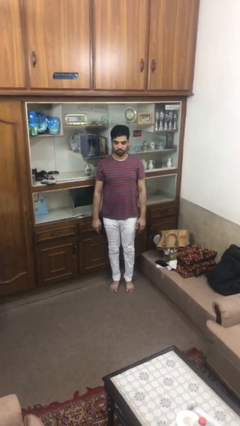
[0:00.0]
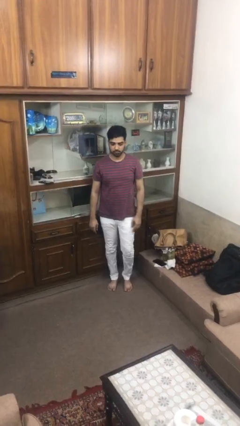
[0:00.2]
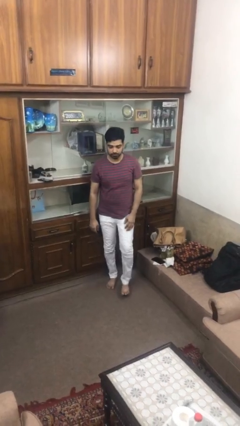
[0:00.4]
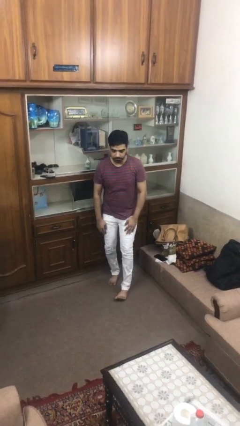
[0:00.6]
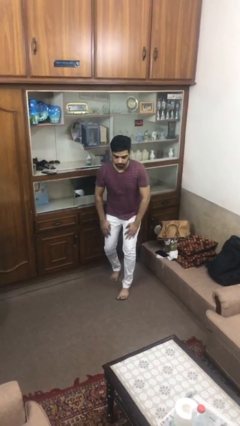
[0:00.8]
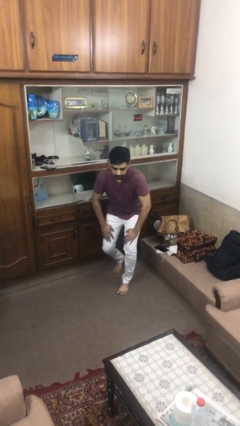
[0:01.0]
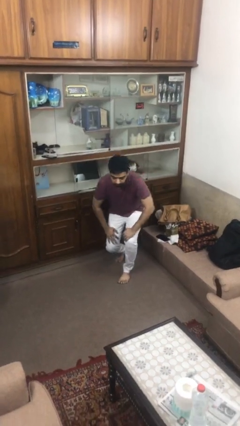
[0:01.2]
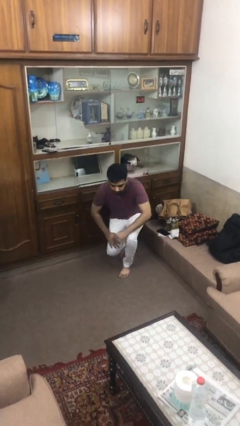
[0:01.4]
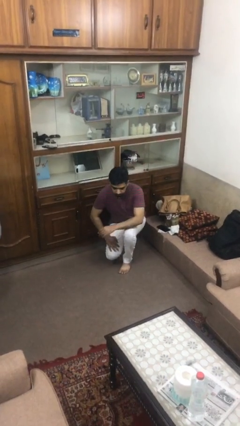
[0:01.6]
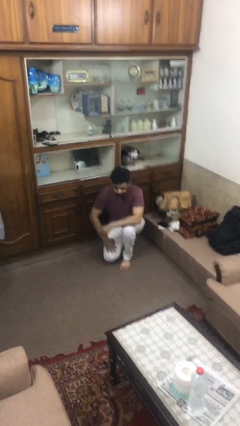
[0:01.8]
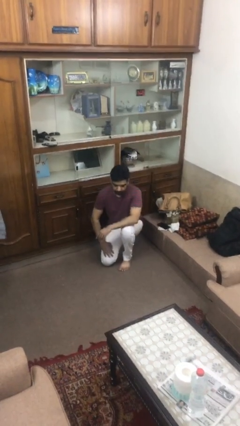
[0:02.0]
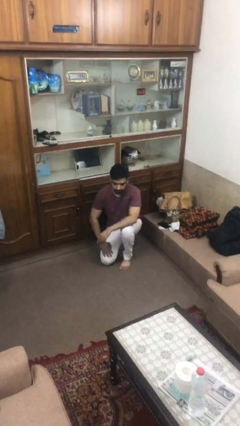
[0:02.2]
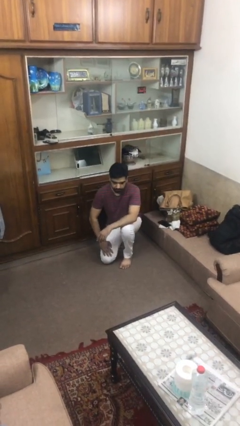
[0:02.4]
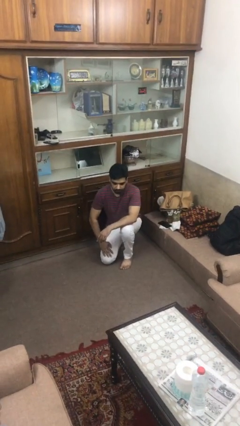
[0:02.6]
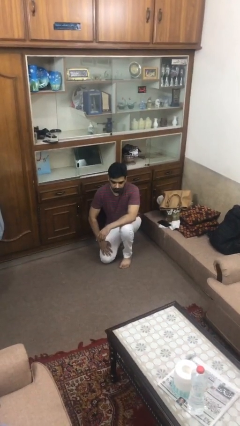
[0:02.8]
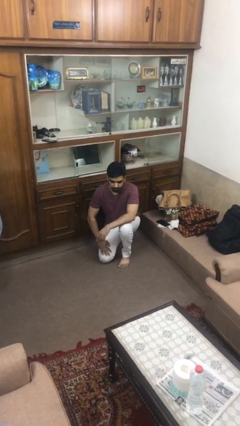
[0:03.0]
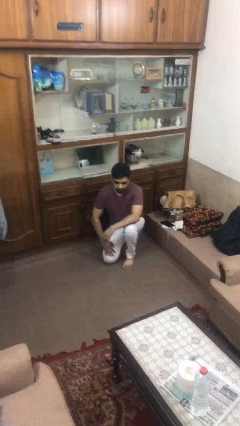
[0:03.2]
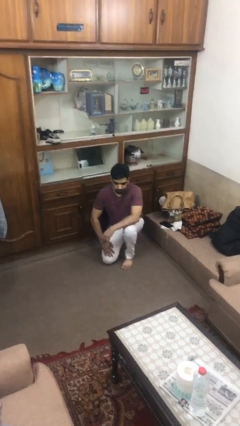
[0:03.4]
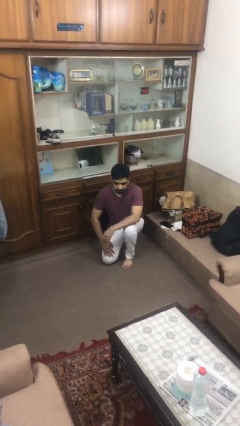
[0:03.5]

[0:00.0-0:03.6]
person kneels

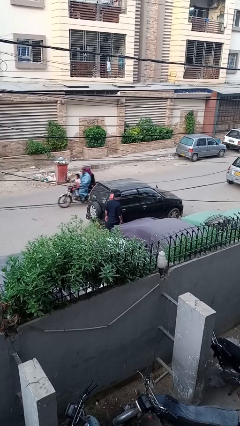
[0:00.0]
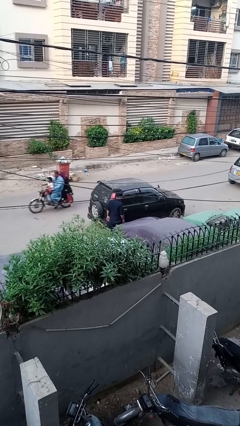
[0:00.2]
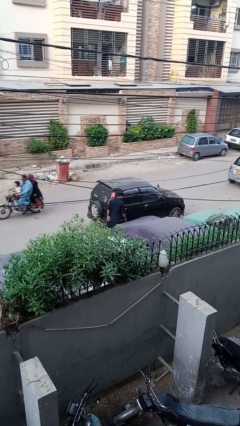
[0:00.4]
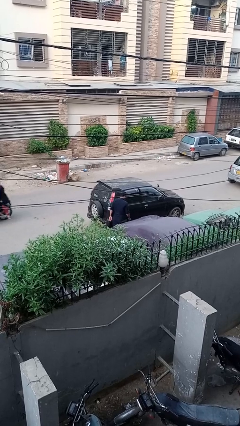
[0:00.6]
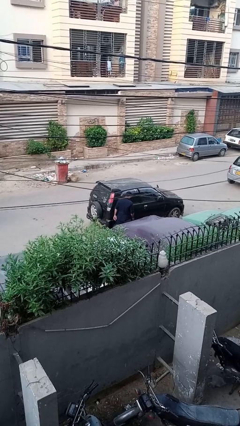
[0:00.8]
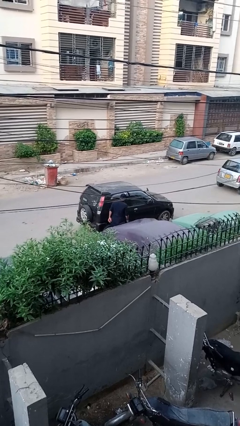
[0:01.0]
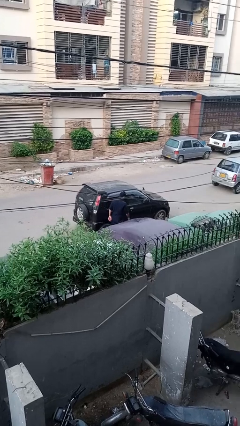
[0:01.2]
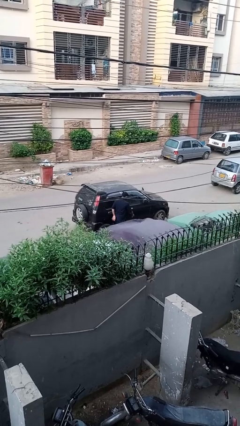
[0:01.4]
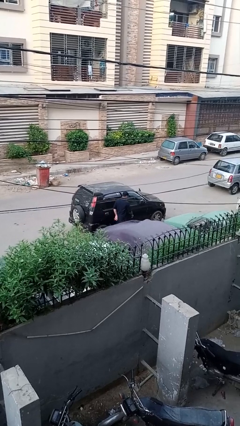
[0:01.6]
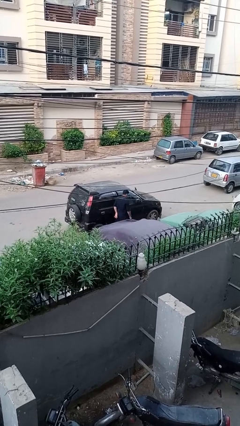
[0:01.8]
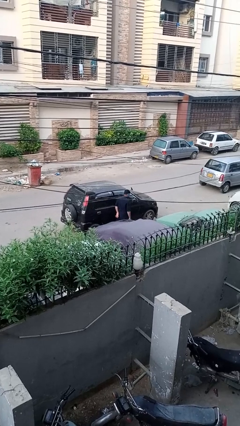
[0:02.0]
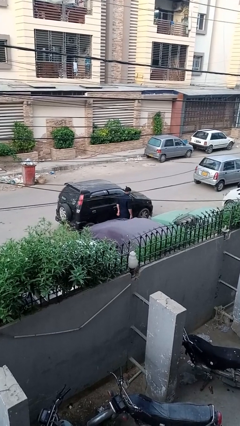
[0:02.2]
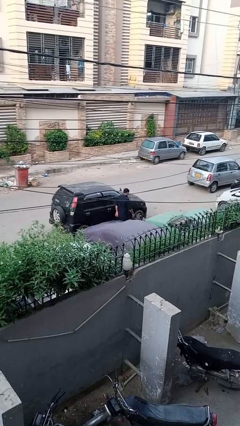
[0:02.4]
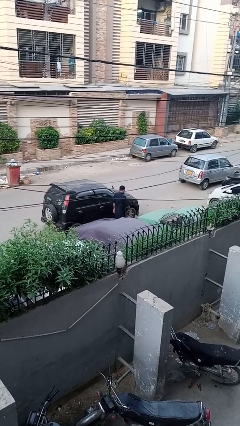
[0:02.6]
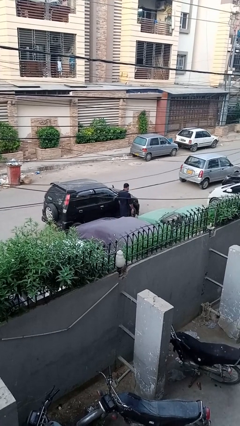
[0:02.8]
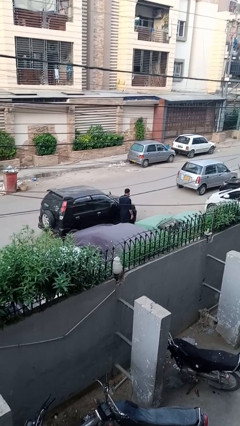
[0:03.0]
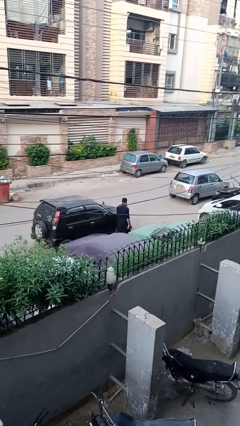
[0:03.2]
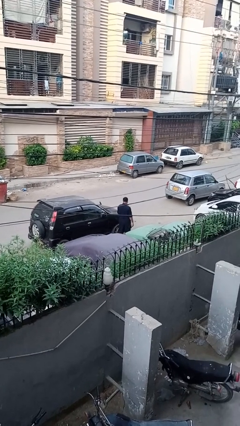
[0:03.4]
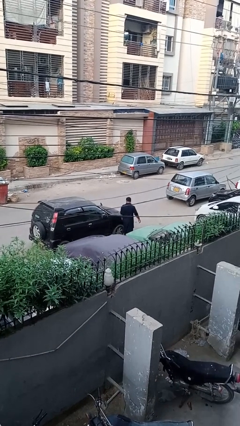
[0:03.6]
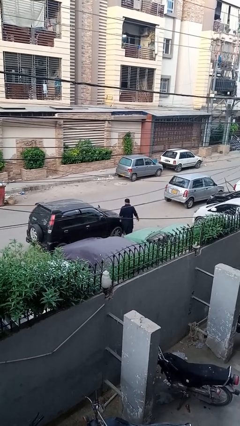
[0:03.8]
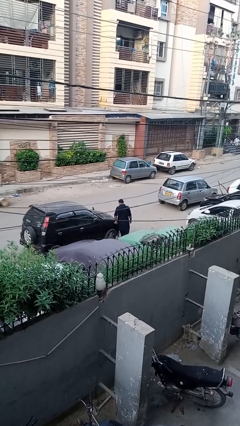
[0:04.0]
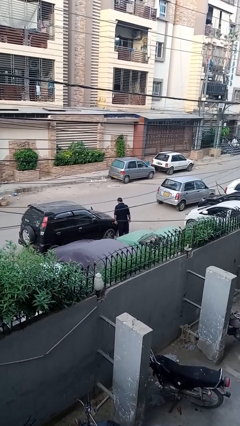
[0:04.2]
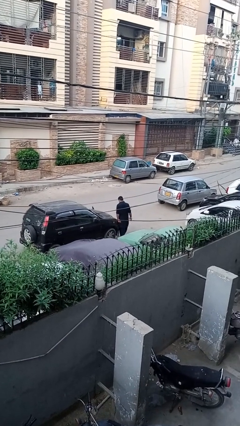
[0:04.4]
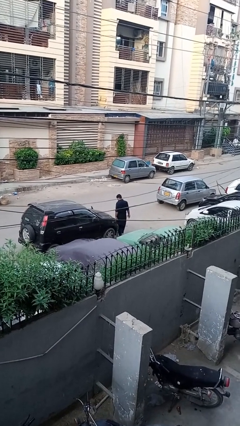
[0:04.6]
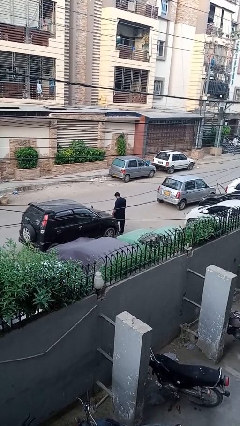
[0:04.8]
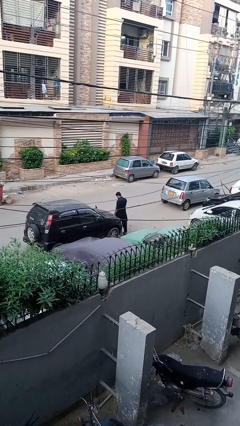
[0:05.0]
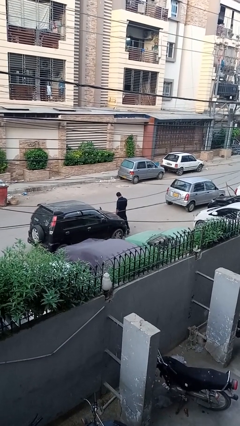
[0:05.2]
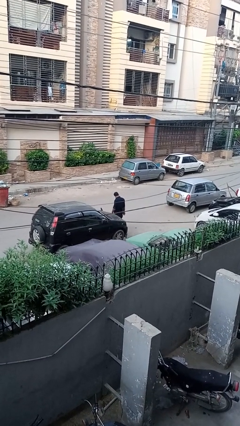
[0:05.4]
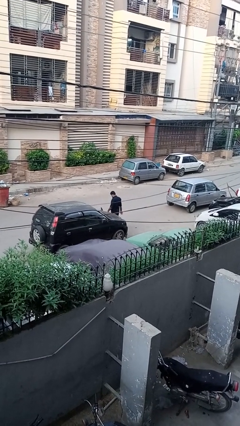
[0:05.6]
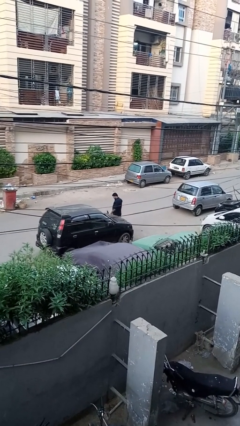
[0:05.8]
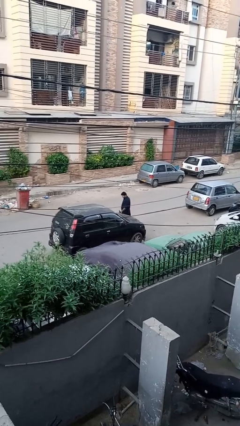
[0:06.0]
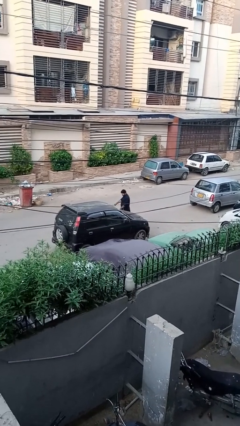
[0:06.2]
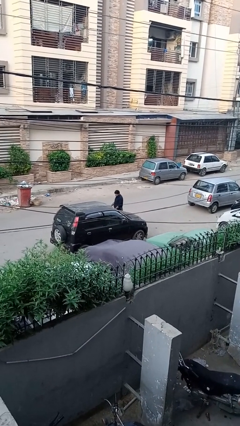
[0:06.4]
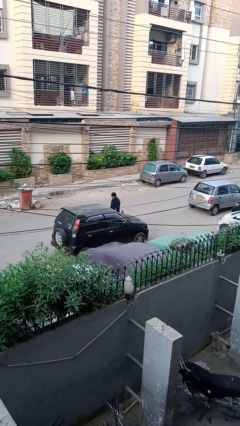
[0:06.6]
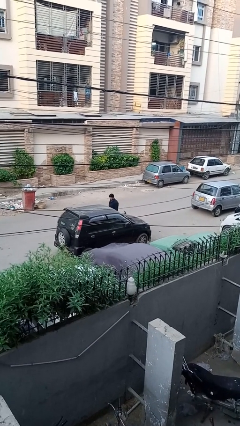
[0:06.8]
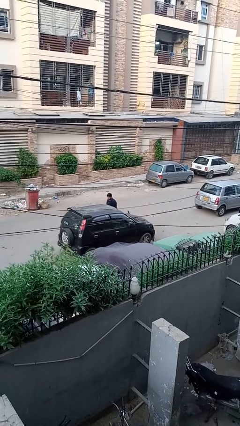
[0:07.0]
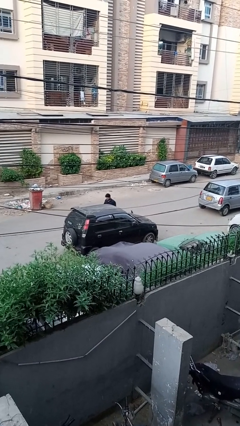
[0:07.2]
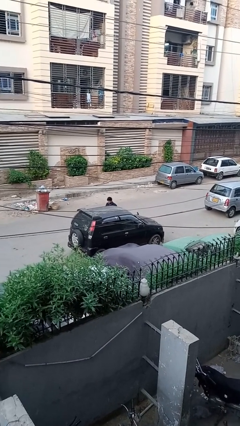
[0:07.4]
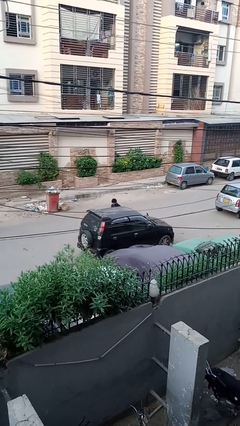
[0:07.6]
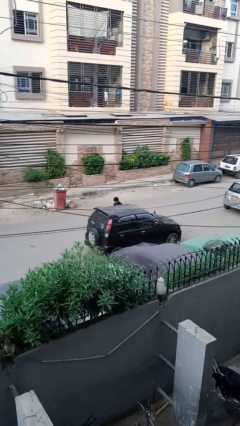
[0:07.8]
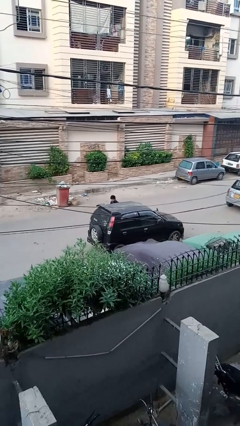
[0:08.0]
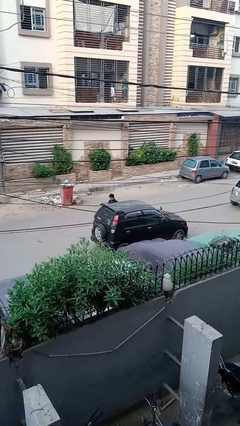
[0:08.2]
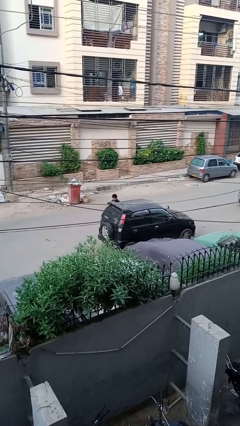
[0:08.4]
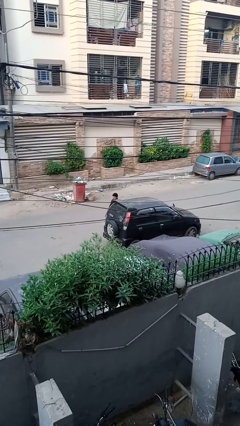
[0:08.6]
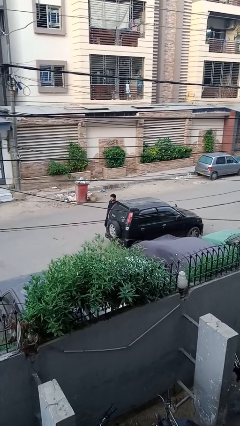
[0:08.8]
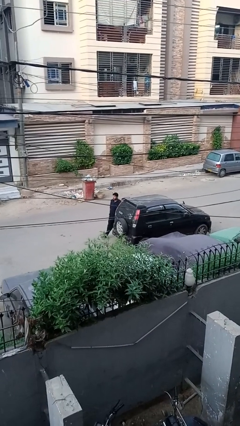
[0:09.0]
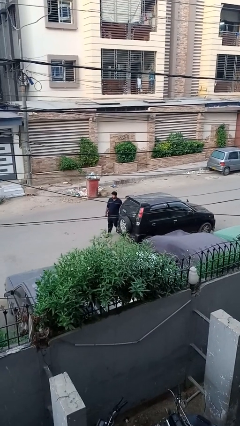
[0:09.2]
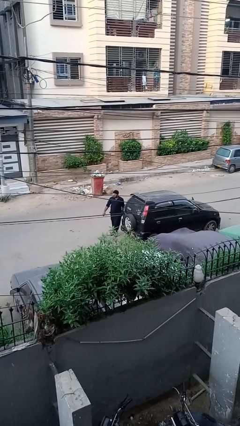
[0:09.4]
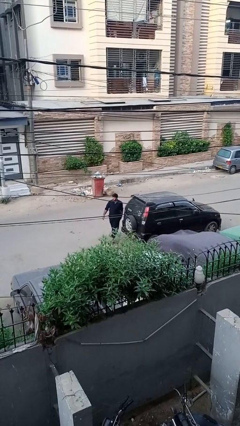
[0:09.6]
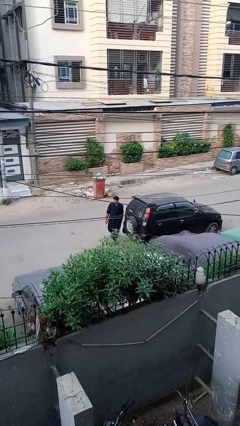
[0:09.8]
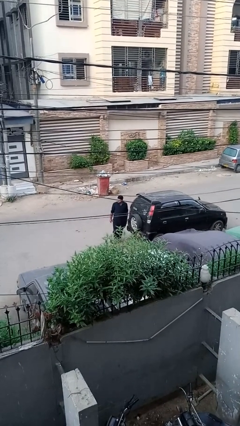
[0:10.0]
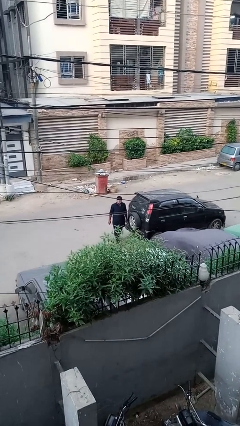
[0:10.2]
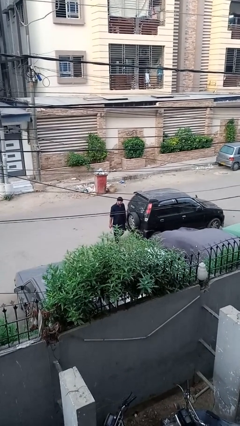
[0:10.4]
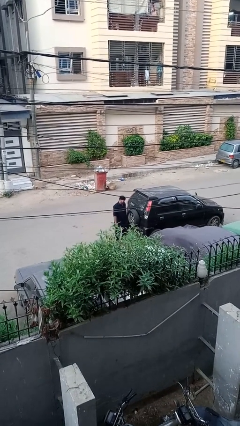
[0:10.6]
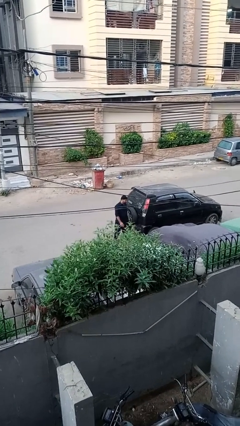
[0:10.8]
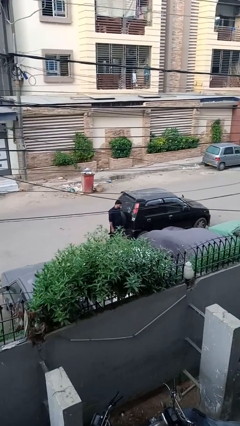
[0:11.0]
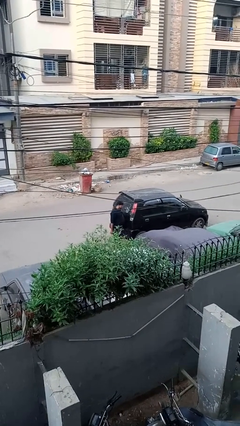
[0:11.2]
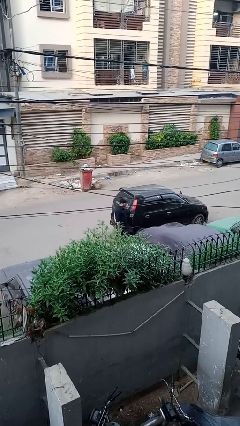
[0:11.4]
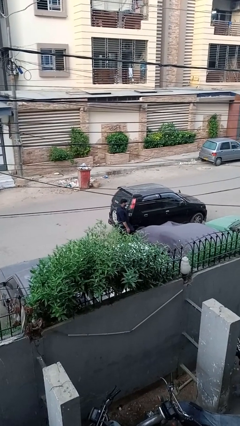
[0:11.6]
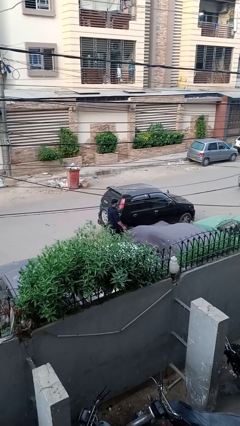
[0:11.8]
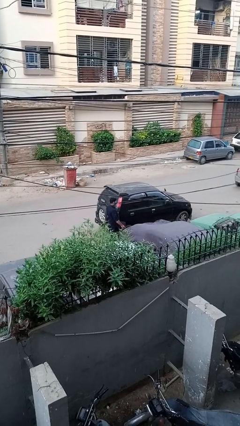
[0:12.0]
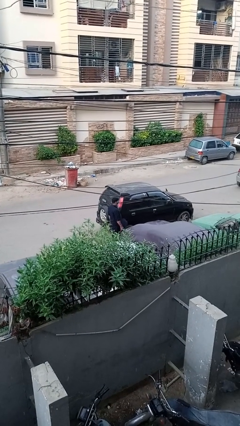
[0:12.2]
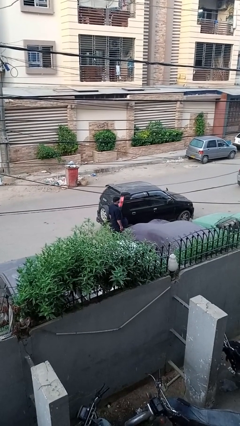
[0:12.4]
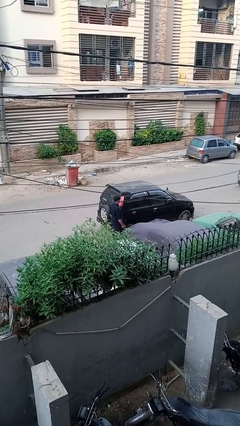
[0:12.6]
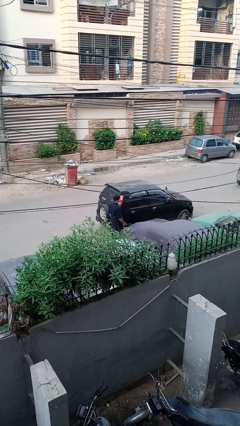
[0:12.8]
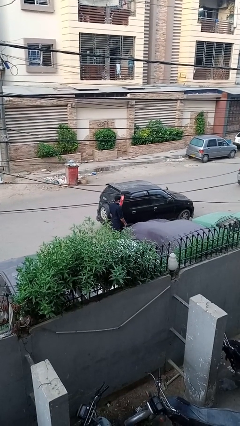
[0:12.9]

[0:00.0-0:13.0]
person walks around car

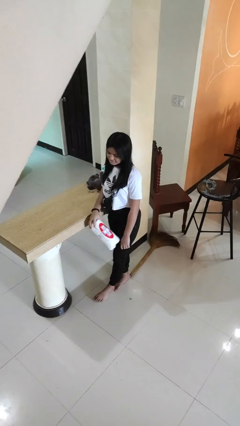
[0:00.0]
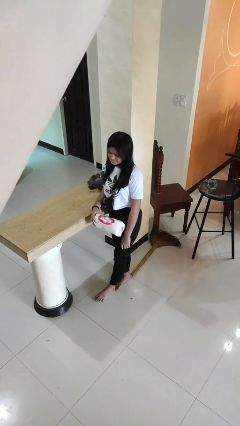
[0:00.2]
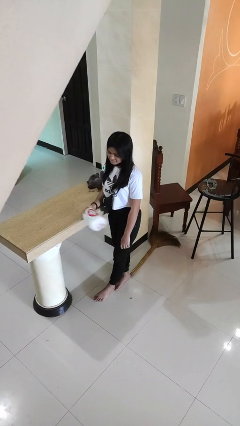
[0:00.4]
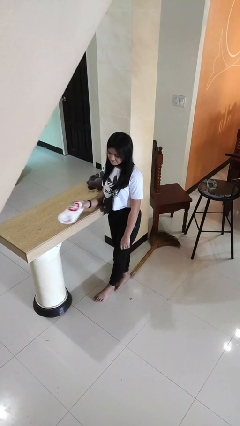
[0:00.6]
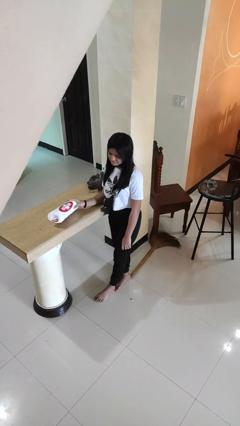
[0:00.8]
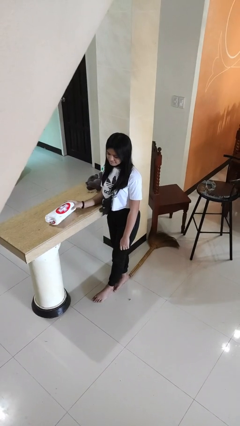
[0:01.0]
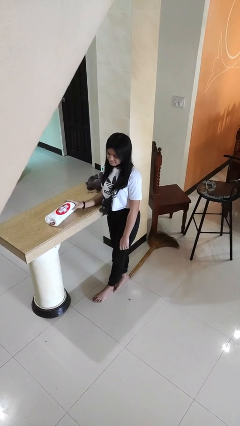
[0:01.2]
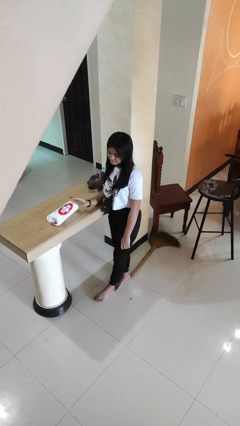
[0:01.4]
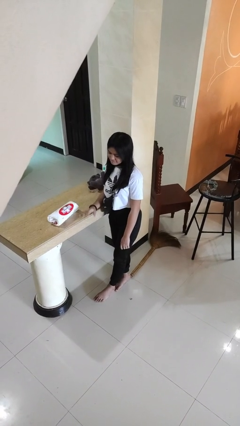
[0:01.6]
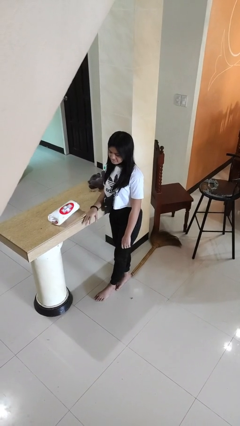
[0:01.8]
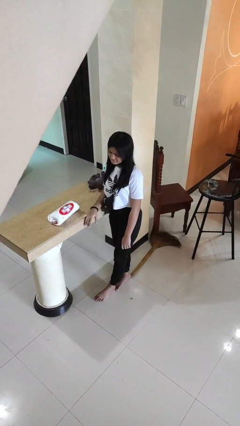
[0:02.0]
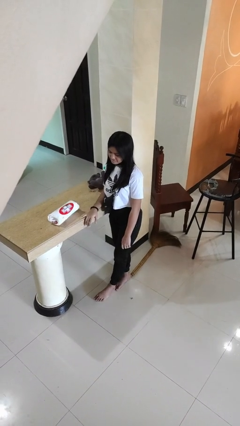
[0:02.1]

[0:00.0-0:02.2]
person puts down object on countertop
